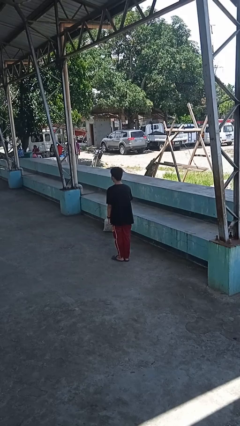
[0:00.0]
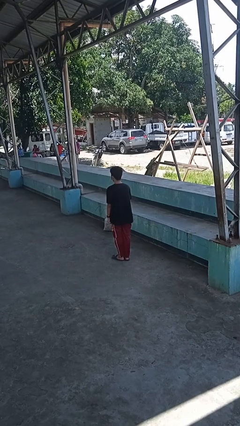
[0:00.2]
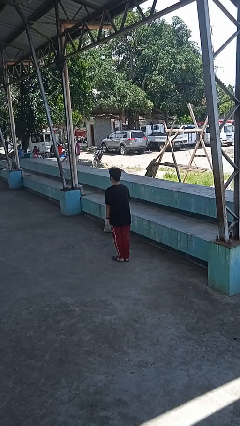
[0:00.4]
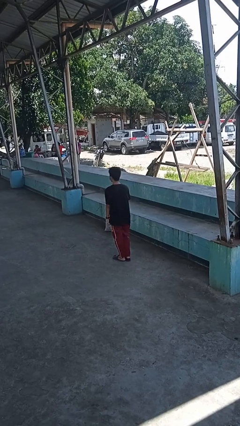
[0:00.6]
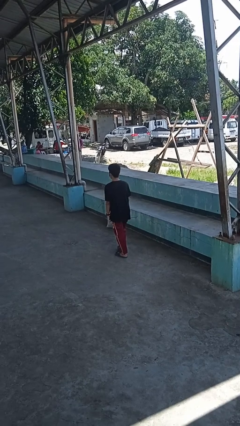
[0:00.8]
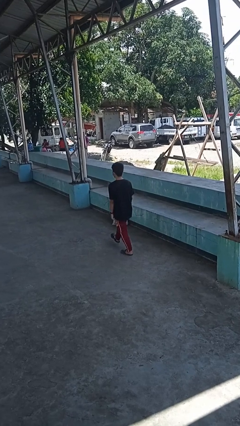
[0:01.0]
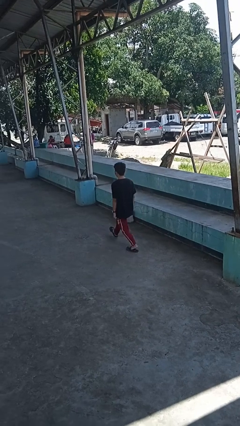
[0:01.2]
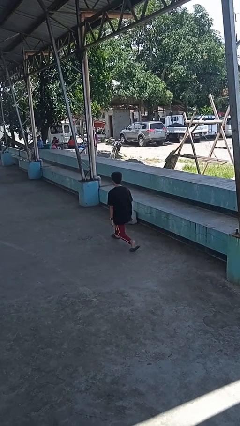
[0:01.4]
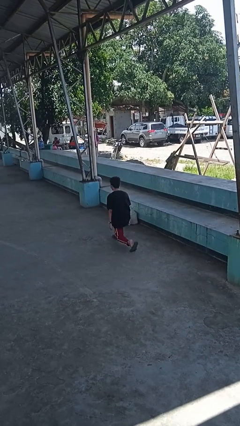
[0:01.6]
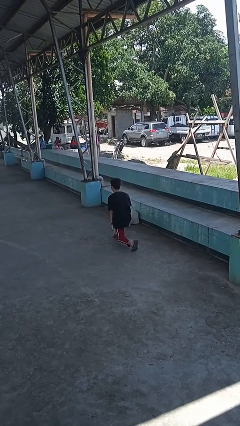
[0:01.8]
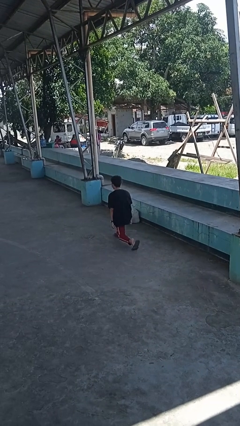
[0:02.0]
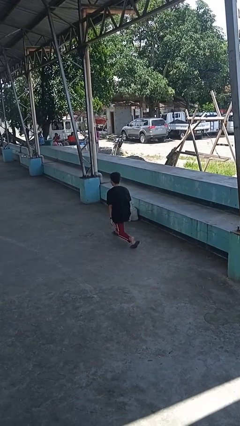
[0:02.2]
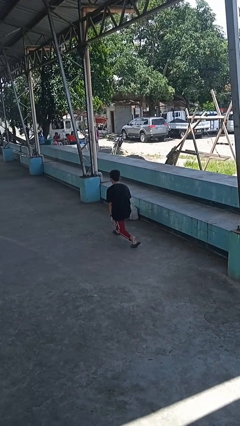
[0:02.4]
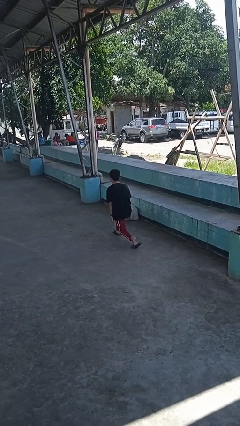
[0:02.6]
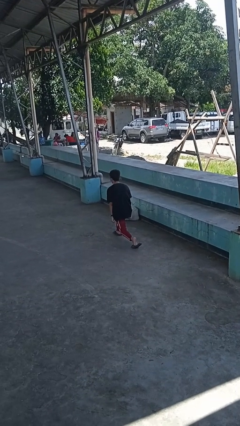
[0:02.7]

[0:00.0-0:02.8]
person exercises with lunges

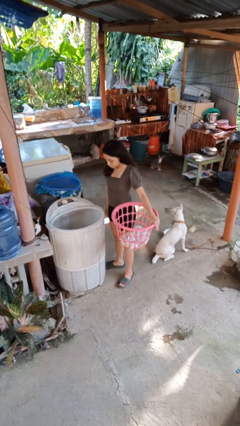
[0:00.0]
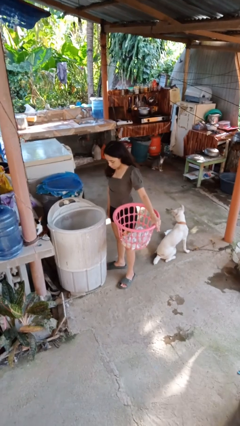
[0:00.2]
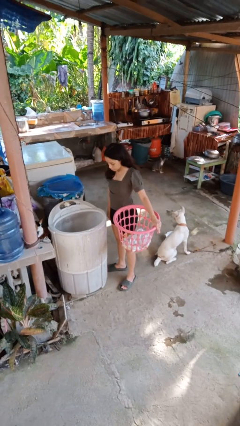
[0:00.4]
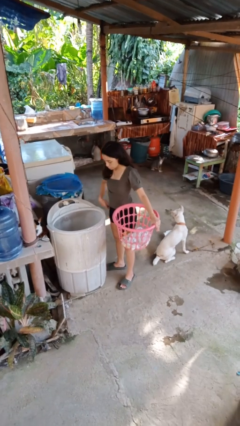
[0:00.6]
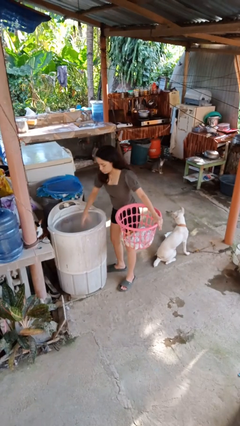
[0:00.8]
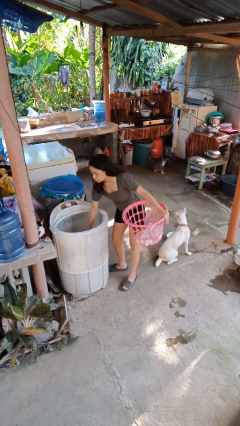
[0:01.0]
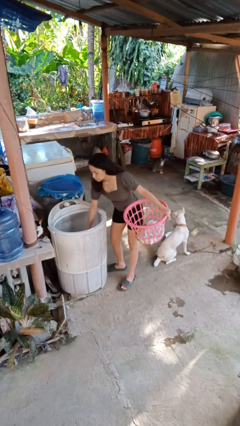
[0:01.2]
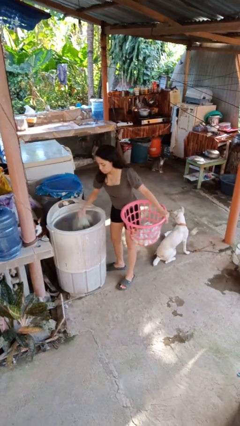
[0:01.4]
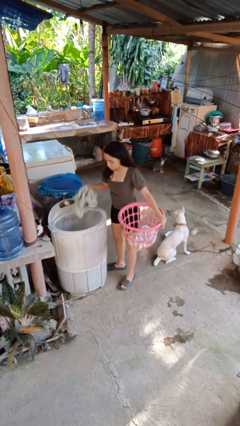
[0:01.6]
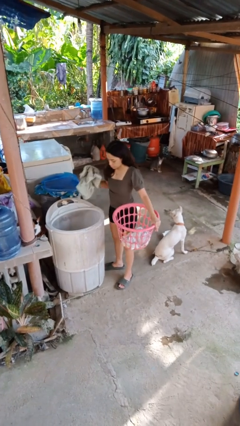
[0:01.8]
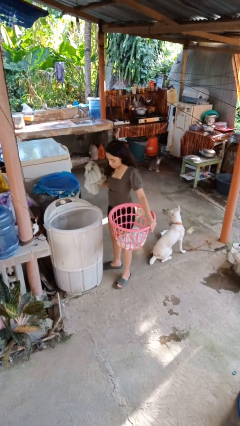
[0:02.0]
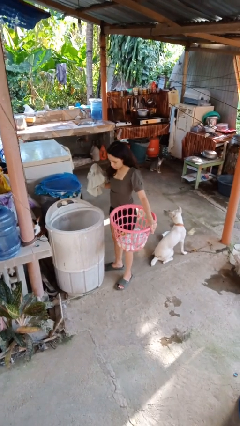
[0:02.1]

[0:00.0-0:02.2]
person unloads dryer

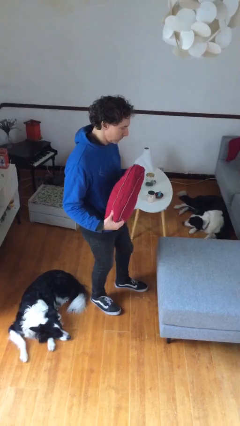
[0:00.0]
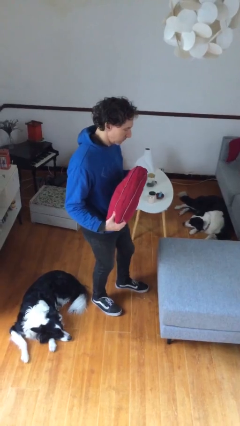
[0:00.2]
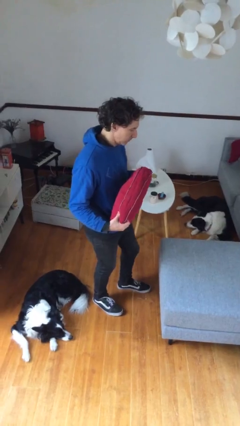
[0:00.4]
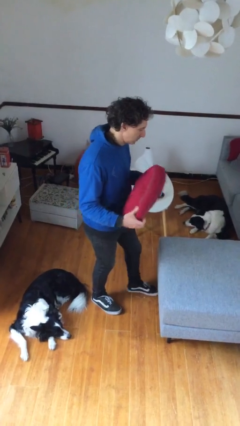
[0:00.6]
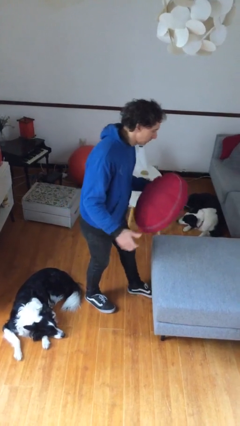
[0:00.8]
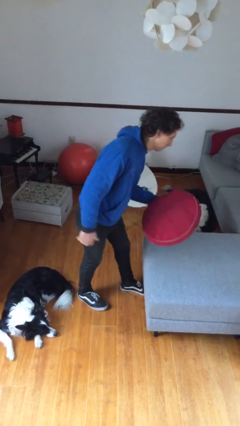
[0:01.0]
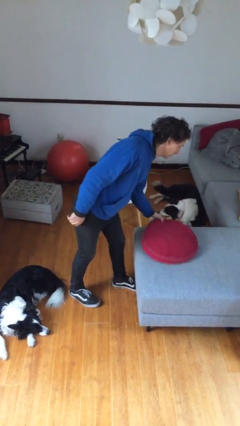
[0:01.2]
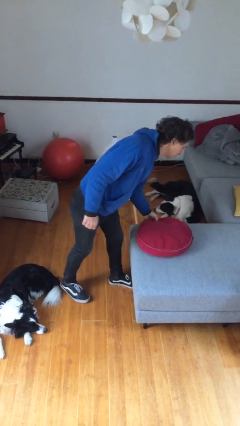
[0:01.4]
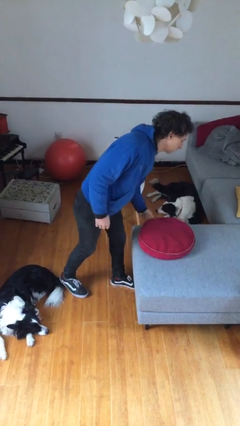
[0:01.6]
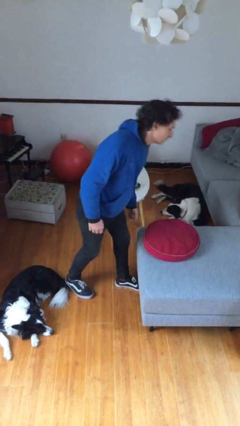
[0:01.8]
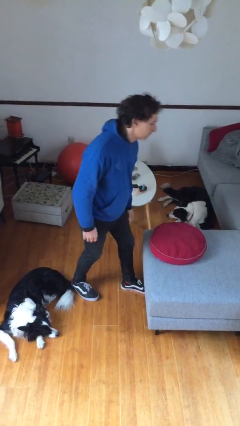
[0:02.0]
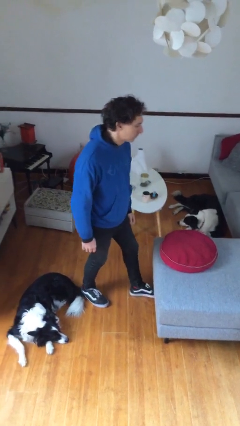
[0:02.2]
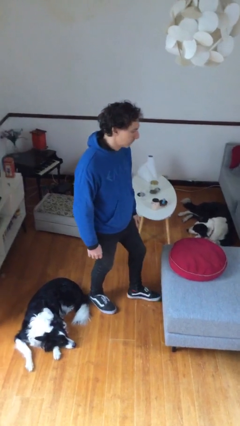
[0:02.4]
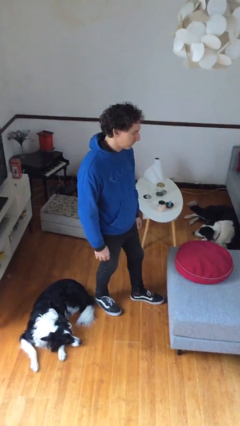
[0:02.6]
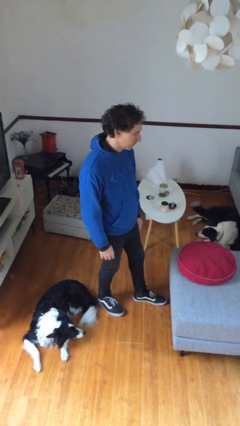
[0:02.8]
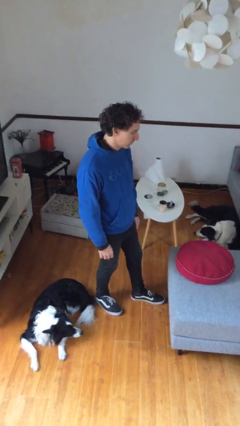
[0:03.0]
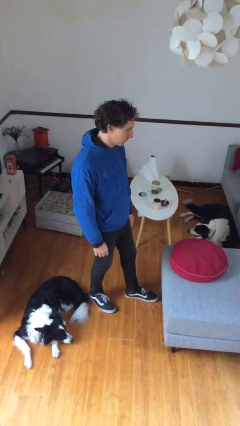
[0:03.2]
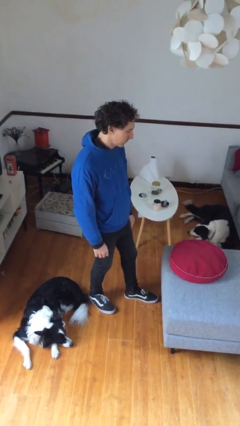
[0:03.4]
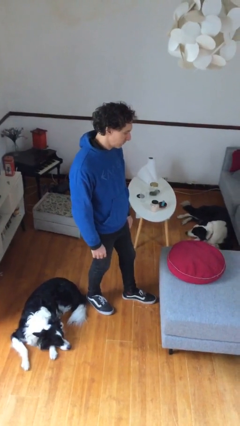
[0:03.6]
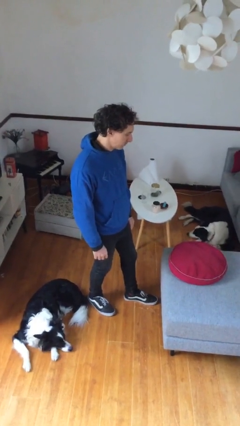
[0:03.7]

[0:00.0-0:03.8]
person puts down object on couch

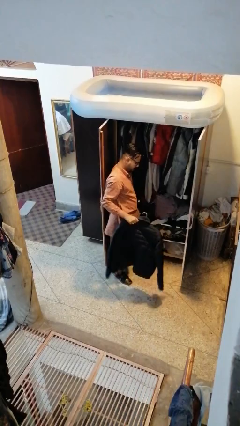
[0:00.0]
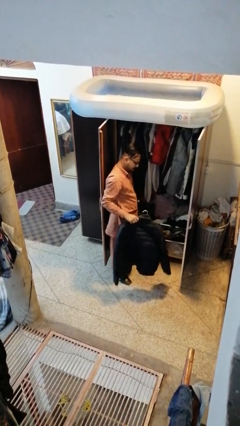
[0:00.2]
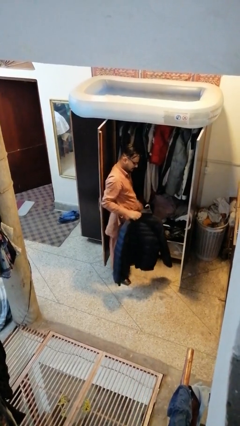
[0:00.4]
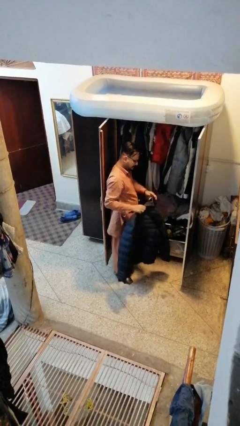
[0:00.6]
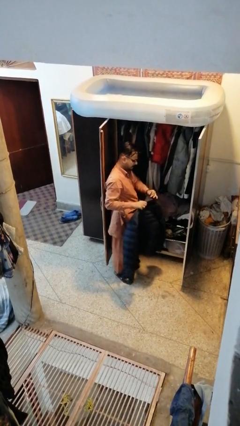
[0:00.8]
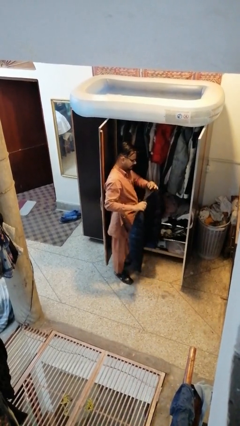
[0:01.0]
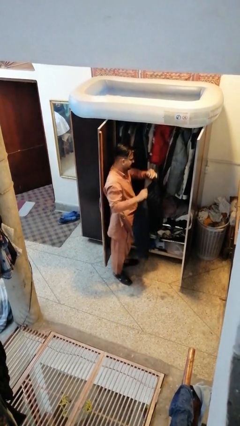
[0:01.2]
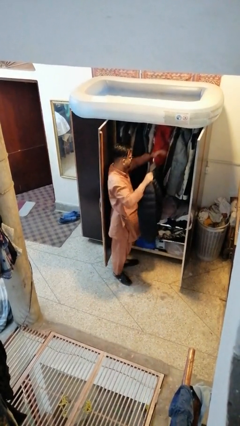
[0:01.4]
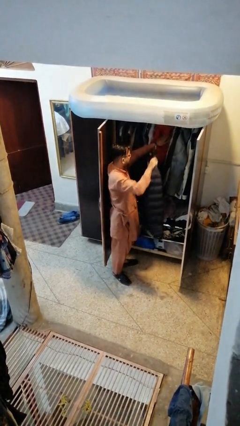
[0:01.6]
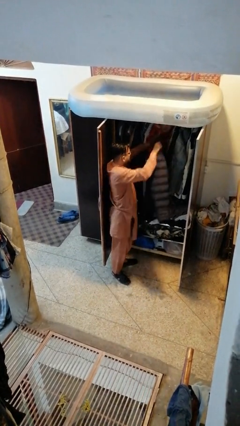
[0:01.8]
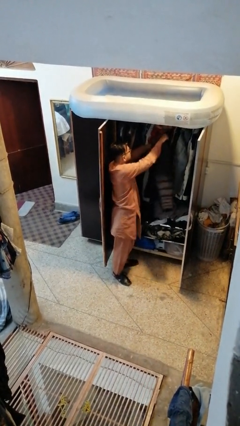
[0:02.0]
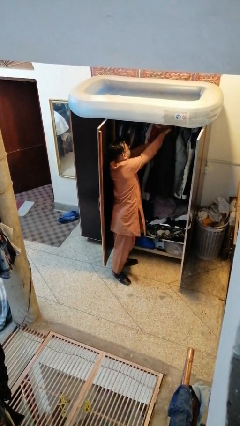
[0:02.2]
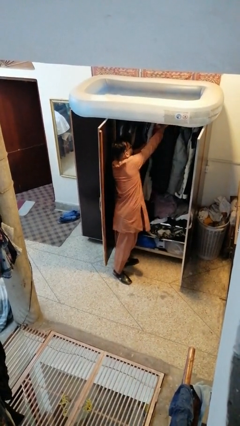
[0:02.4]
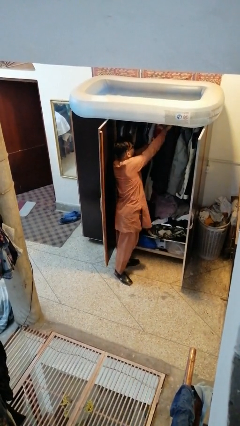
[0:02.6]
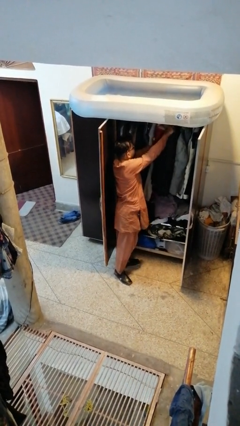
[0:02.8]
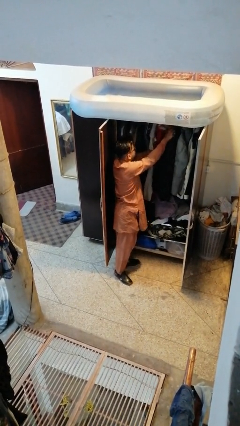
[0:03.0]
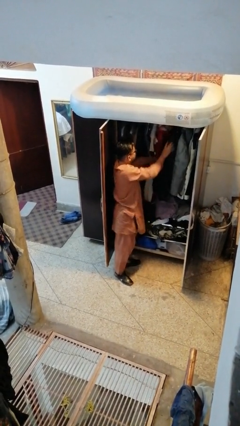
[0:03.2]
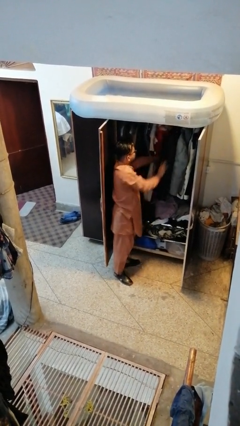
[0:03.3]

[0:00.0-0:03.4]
person puts clothes into closet

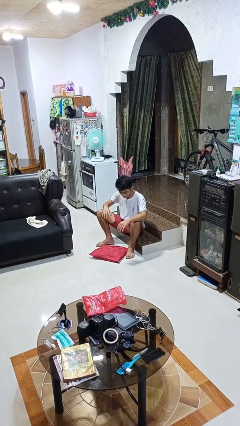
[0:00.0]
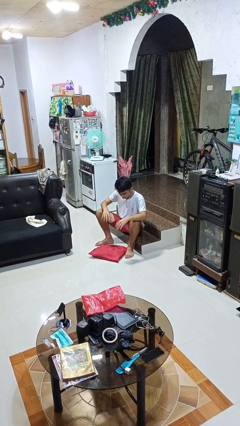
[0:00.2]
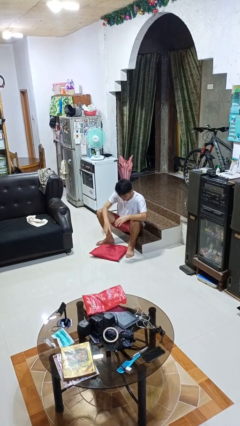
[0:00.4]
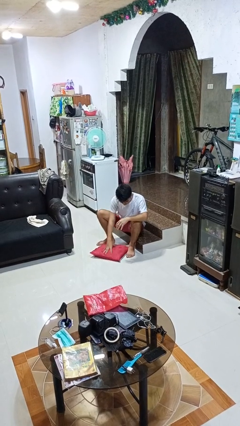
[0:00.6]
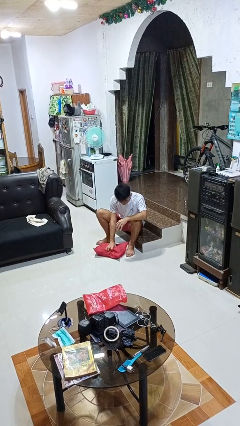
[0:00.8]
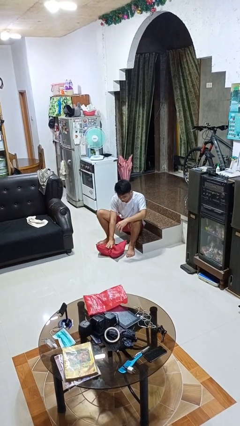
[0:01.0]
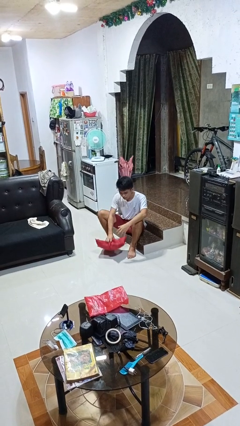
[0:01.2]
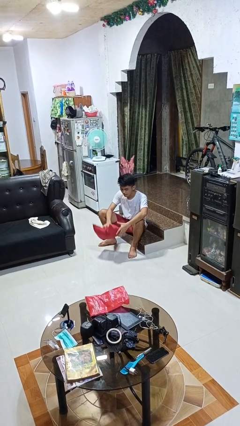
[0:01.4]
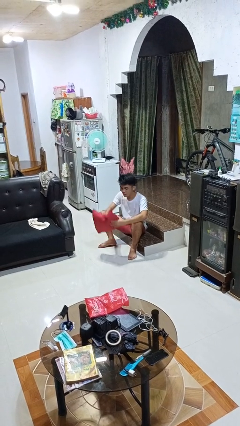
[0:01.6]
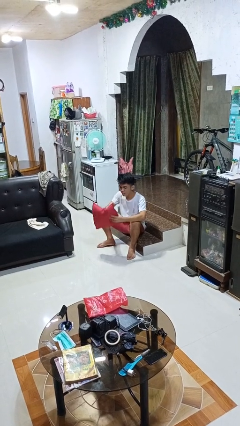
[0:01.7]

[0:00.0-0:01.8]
person picks up object from floor

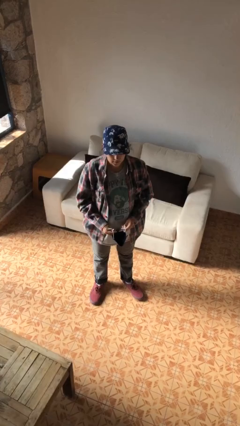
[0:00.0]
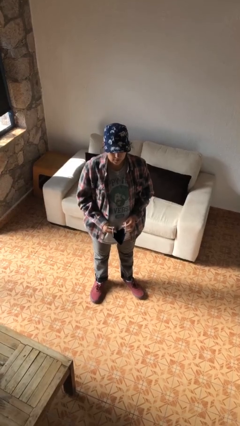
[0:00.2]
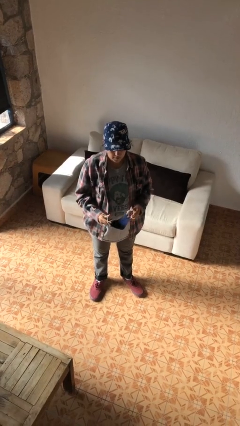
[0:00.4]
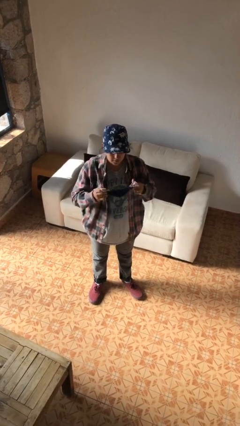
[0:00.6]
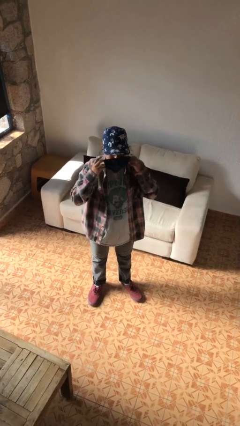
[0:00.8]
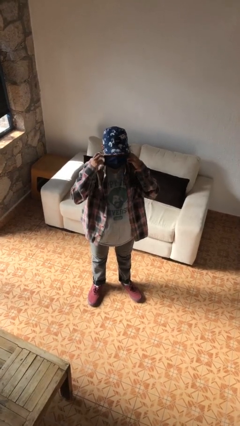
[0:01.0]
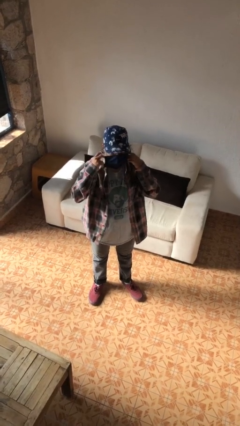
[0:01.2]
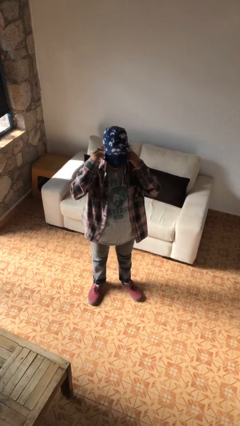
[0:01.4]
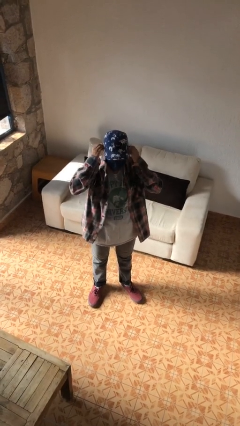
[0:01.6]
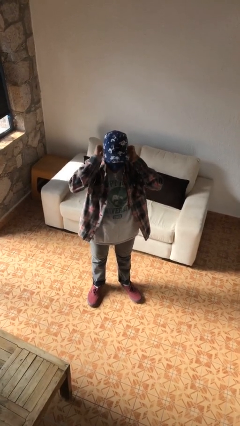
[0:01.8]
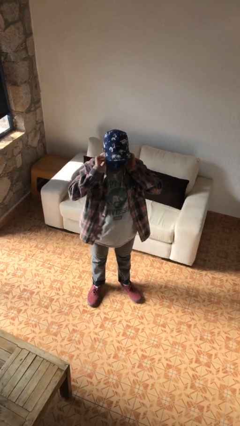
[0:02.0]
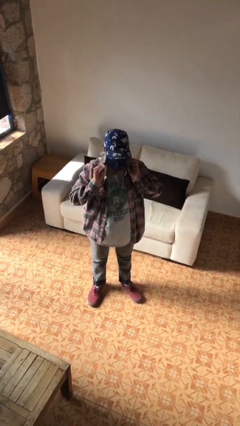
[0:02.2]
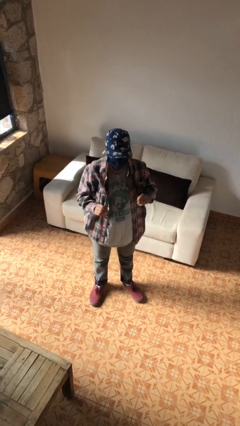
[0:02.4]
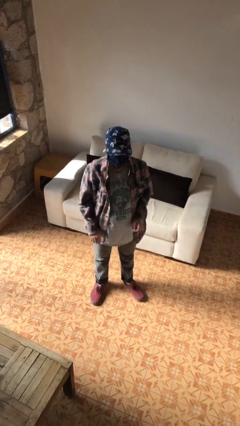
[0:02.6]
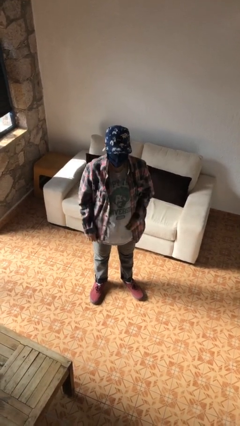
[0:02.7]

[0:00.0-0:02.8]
person puts on facemask

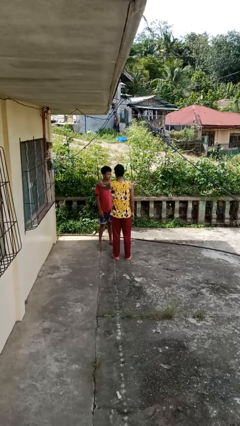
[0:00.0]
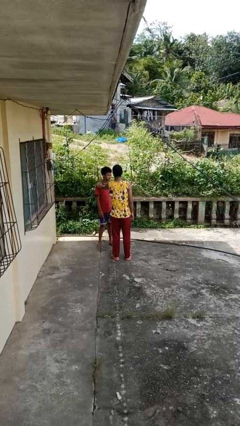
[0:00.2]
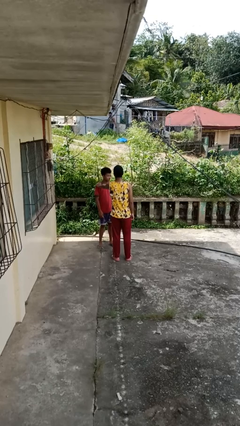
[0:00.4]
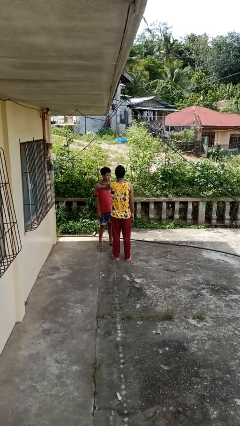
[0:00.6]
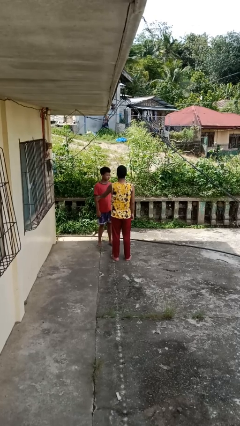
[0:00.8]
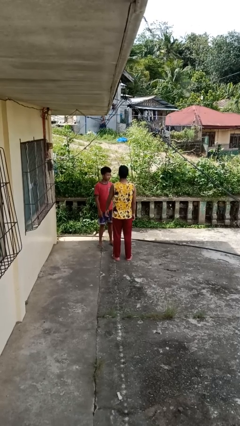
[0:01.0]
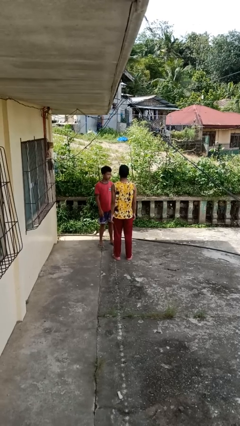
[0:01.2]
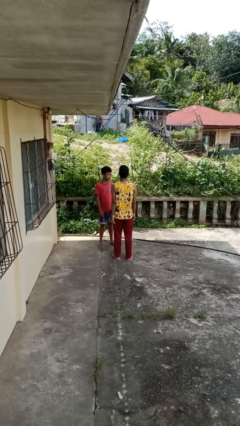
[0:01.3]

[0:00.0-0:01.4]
person shoves person
